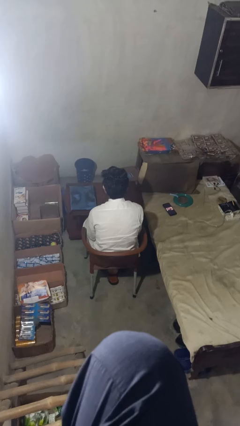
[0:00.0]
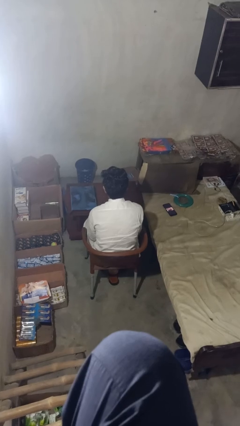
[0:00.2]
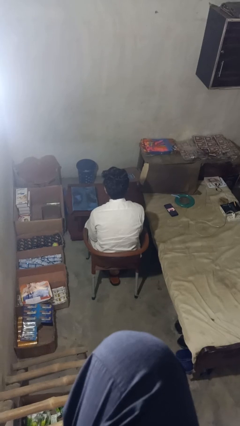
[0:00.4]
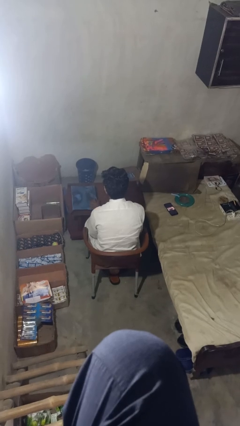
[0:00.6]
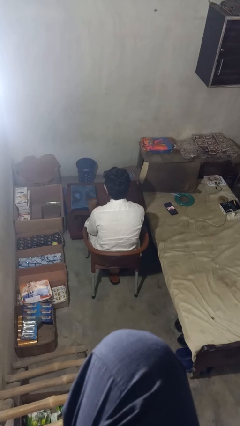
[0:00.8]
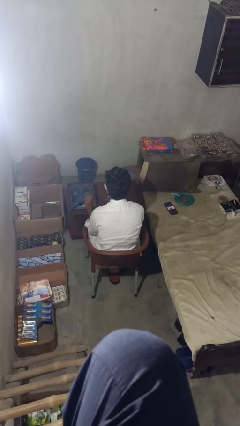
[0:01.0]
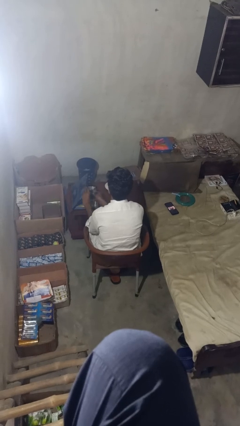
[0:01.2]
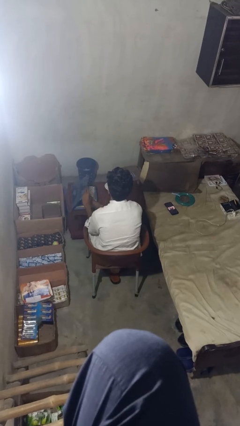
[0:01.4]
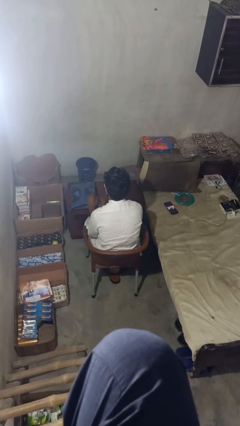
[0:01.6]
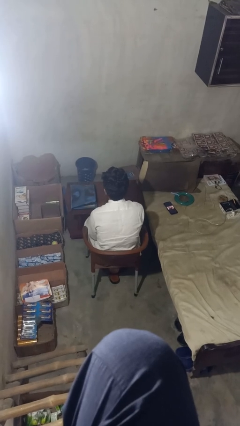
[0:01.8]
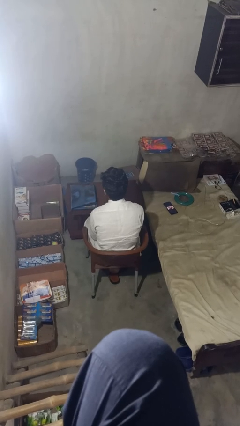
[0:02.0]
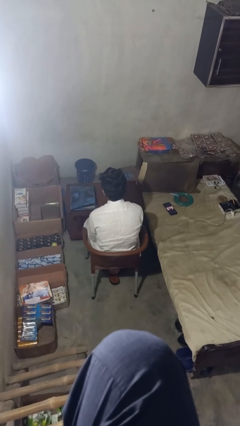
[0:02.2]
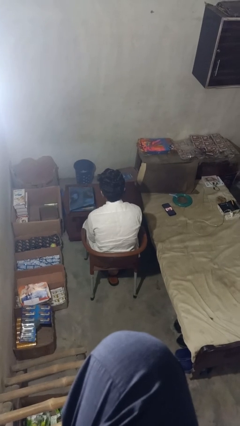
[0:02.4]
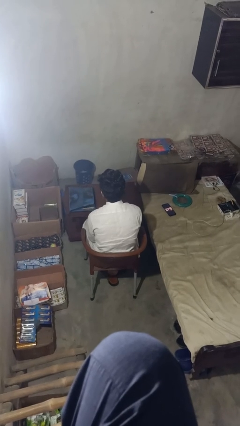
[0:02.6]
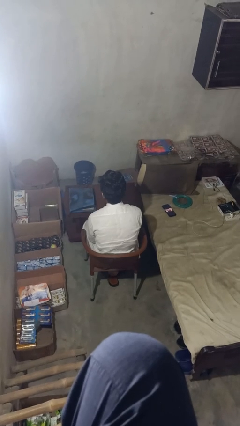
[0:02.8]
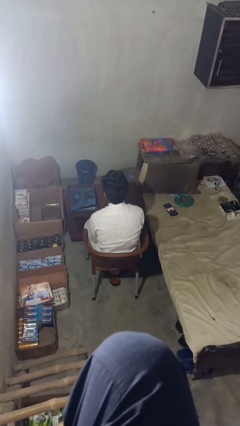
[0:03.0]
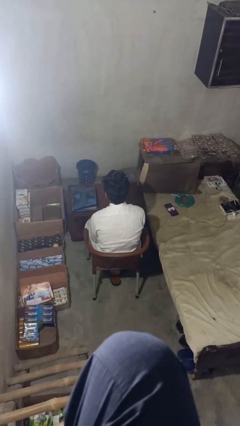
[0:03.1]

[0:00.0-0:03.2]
person takes object from bag

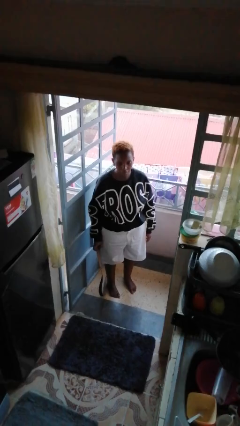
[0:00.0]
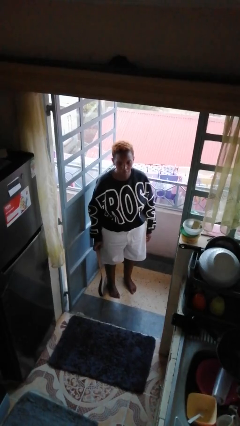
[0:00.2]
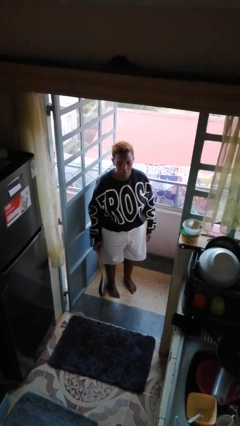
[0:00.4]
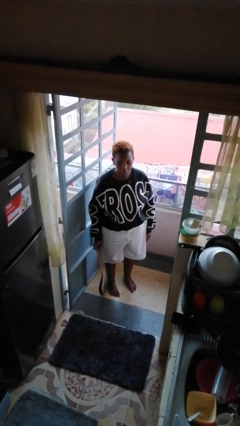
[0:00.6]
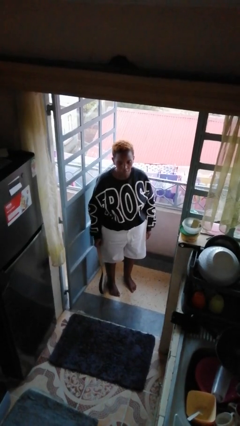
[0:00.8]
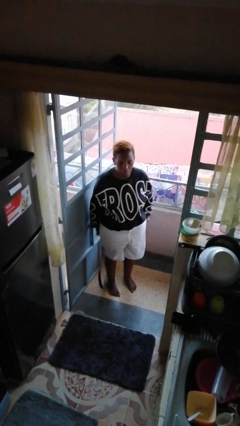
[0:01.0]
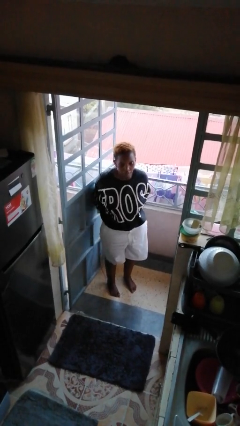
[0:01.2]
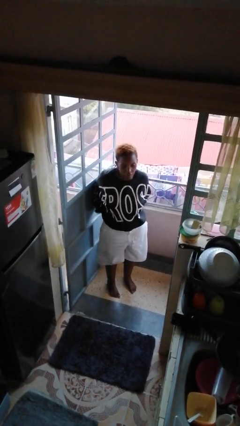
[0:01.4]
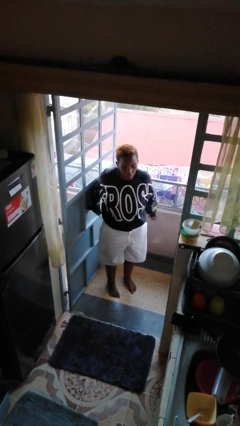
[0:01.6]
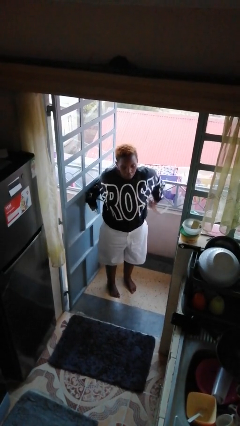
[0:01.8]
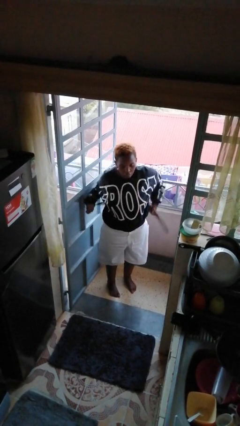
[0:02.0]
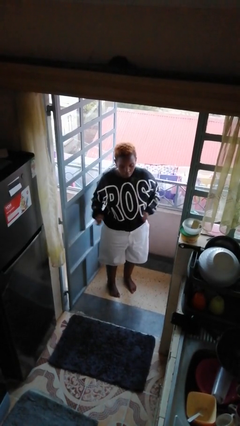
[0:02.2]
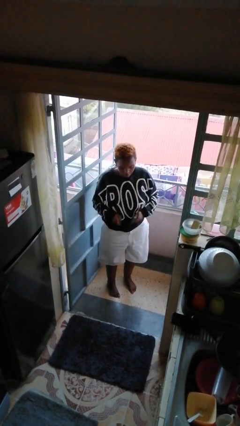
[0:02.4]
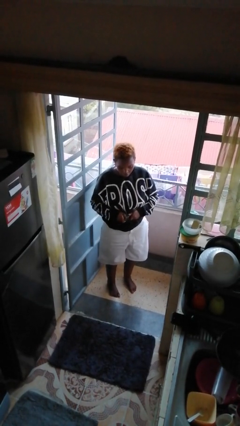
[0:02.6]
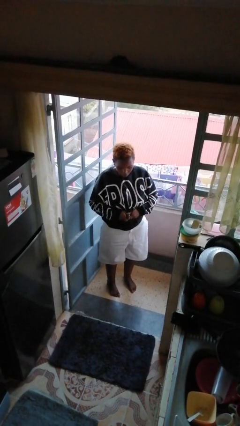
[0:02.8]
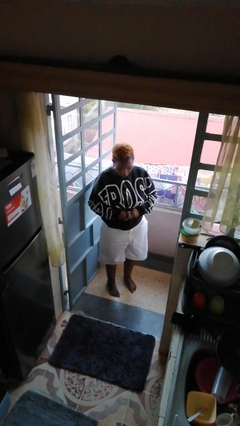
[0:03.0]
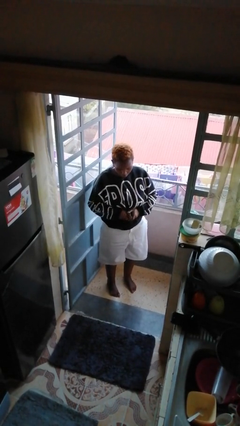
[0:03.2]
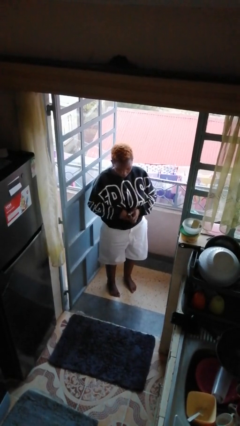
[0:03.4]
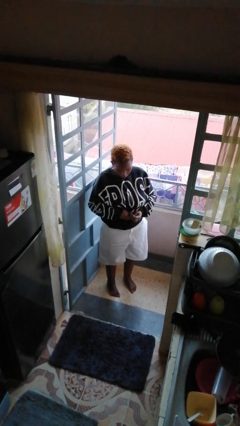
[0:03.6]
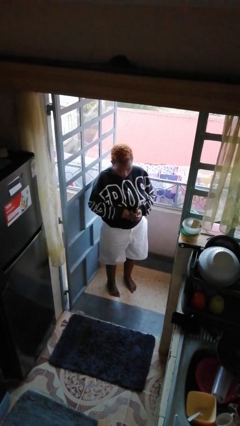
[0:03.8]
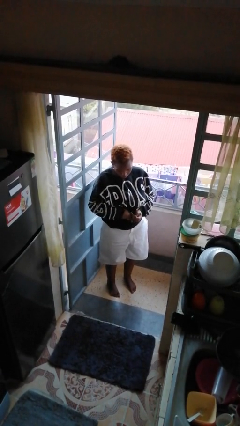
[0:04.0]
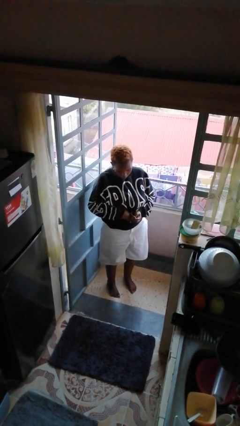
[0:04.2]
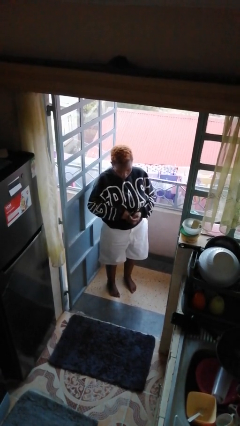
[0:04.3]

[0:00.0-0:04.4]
person puts on belt

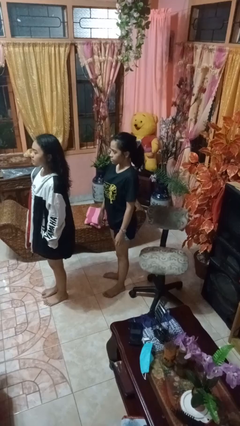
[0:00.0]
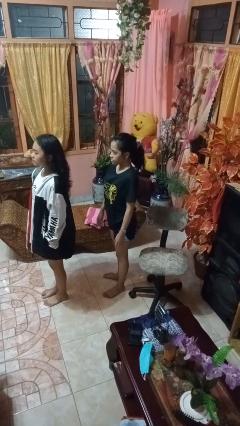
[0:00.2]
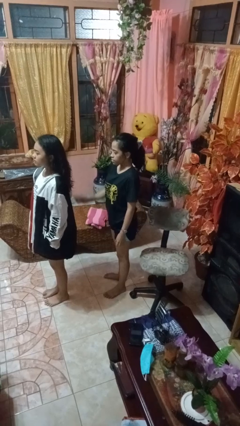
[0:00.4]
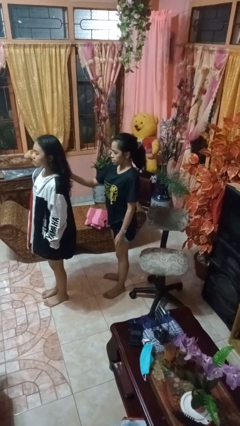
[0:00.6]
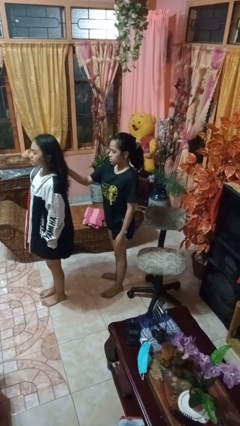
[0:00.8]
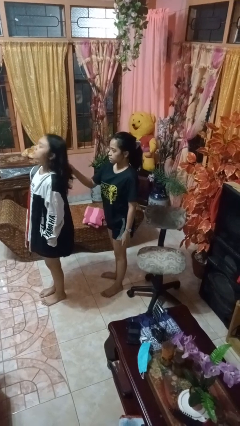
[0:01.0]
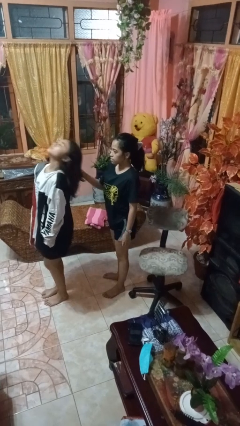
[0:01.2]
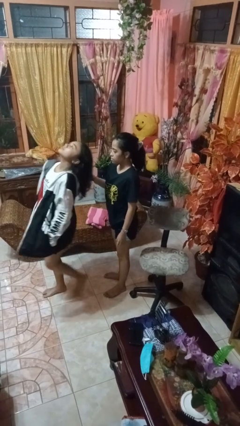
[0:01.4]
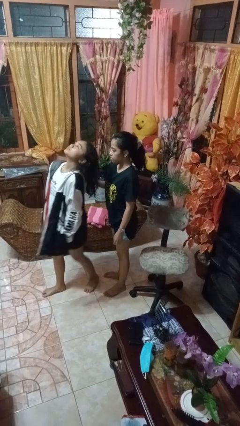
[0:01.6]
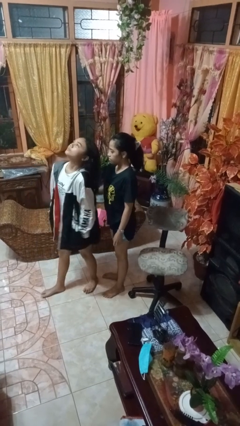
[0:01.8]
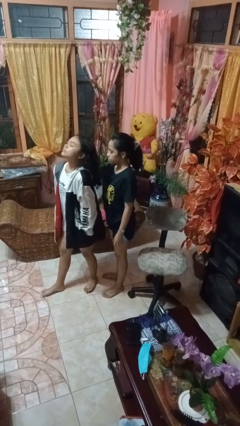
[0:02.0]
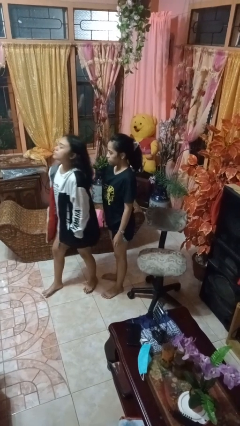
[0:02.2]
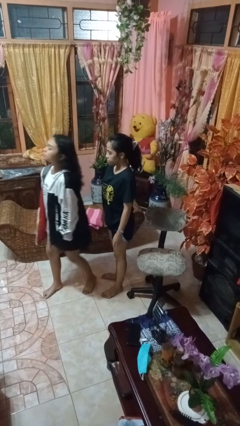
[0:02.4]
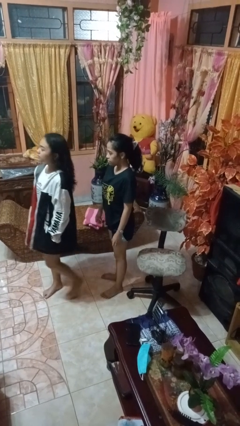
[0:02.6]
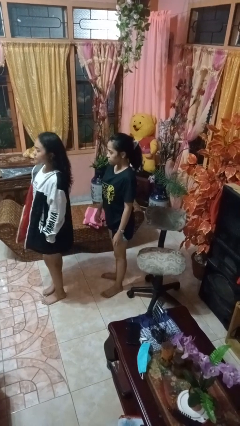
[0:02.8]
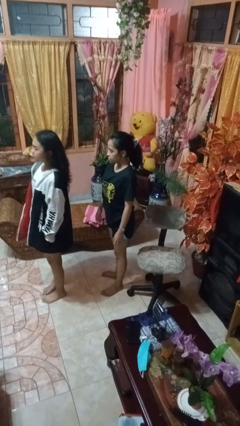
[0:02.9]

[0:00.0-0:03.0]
person grabs person by hair

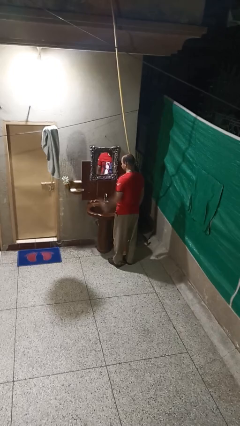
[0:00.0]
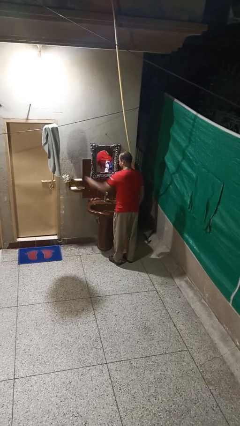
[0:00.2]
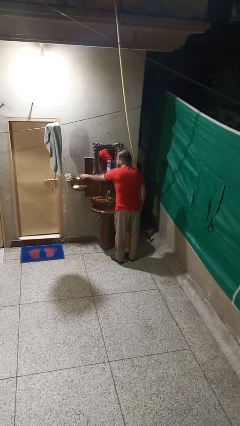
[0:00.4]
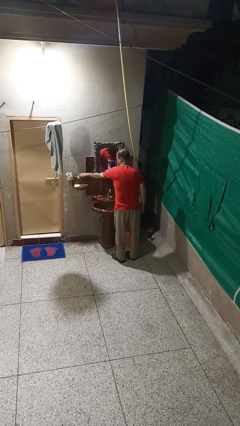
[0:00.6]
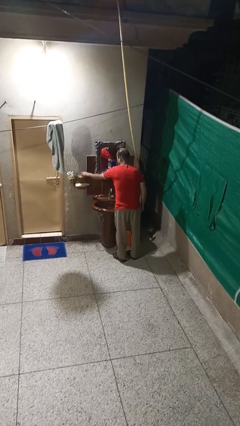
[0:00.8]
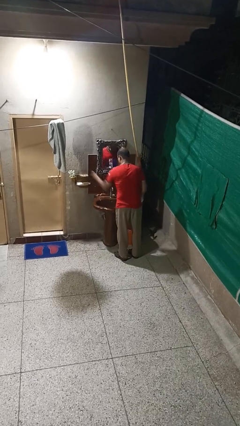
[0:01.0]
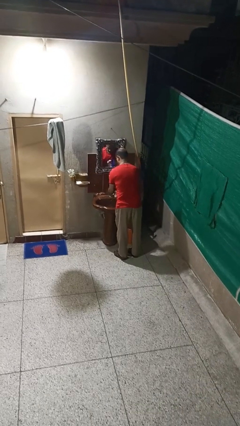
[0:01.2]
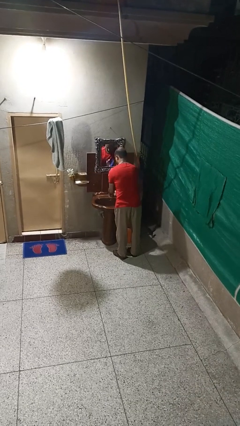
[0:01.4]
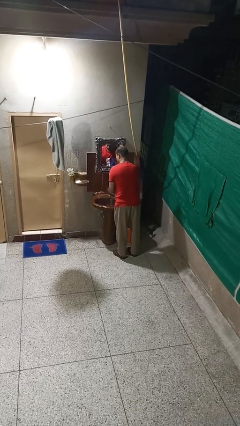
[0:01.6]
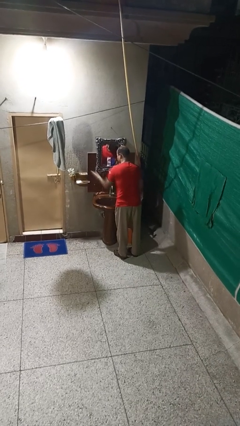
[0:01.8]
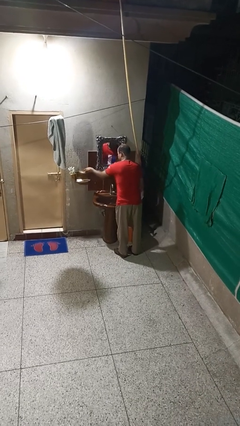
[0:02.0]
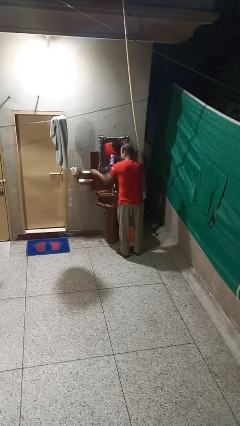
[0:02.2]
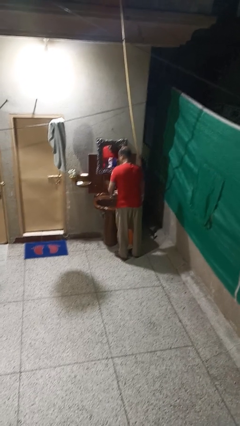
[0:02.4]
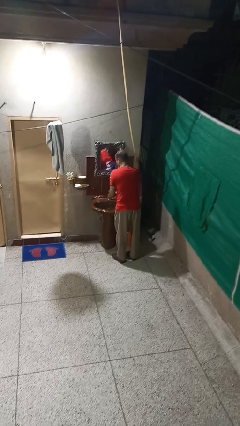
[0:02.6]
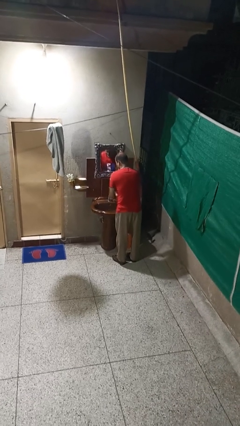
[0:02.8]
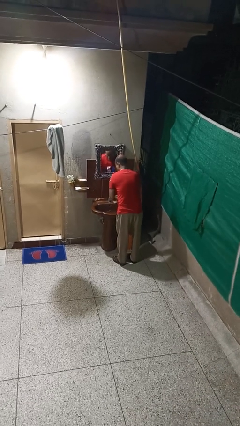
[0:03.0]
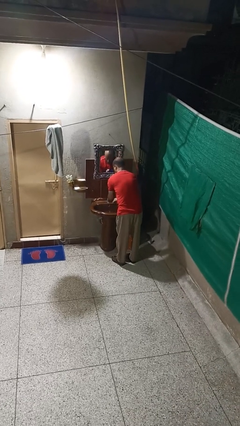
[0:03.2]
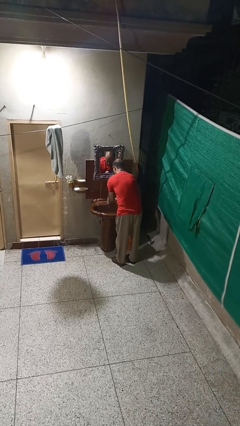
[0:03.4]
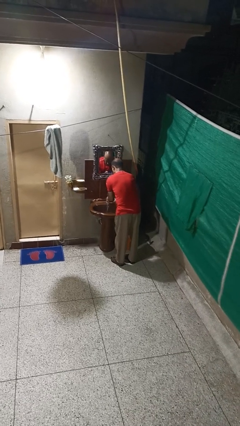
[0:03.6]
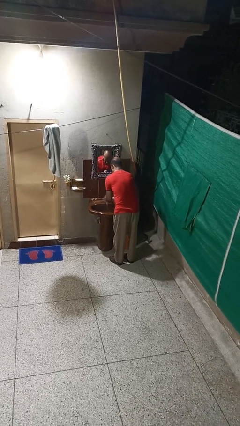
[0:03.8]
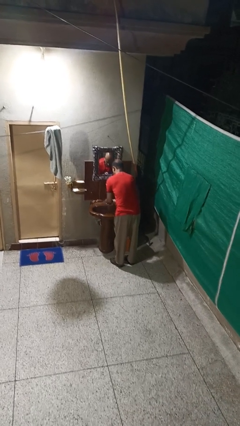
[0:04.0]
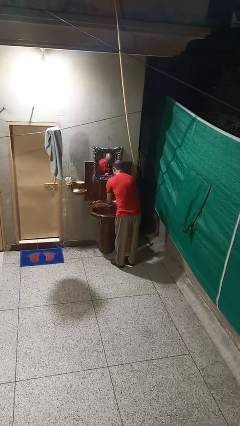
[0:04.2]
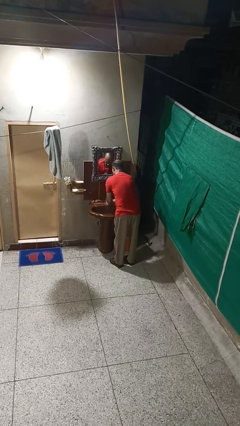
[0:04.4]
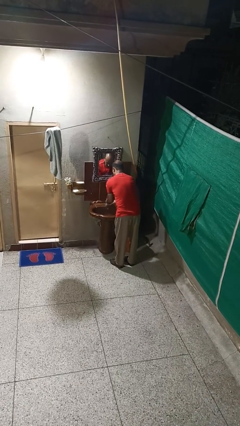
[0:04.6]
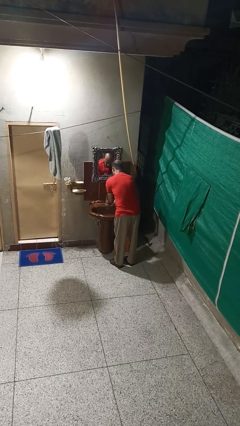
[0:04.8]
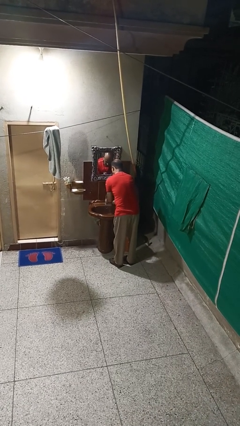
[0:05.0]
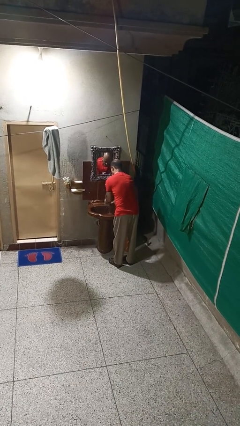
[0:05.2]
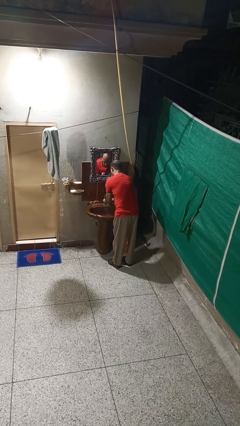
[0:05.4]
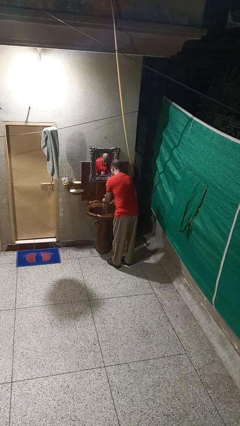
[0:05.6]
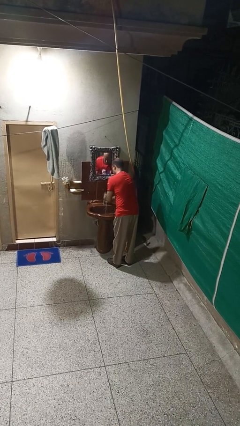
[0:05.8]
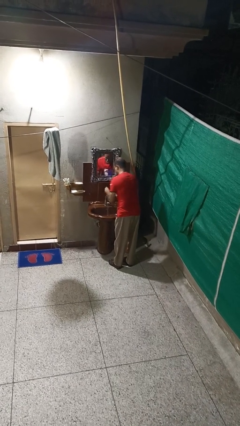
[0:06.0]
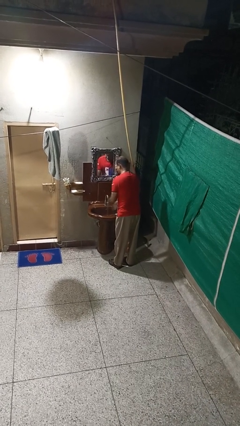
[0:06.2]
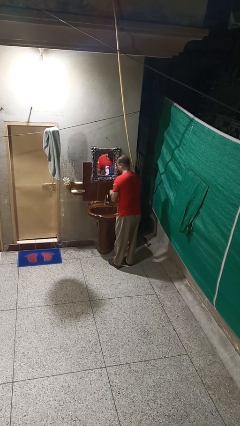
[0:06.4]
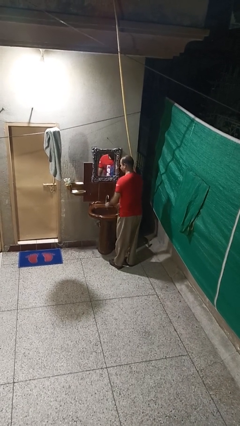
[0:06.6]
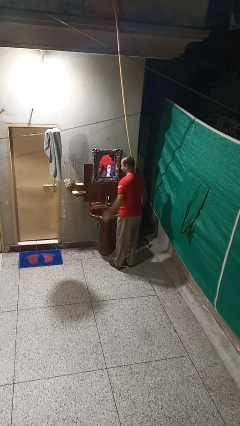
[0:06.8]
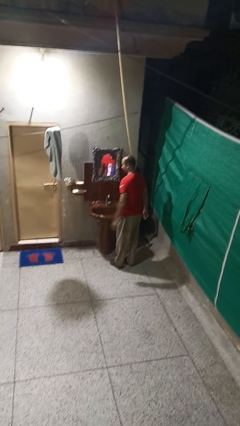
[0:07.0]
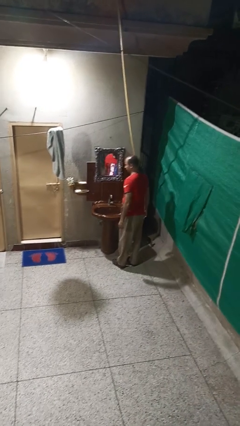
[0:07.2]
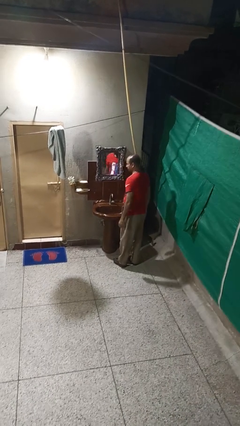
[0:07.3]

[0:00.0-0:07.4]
person washes hands
